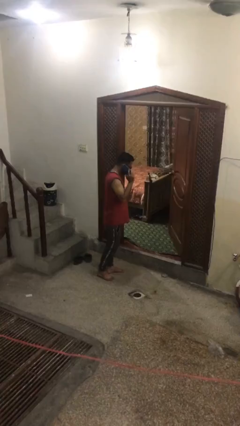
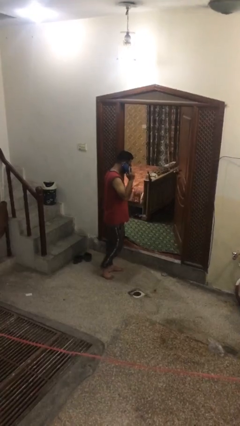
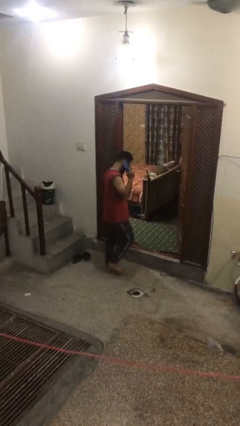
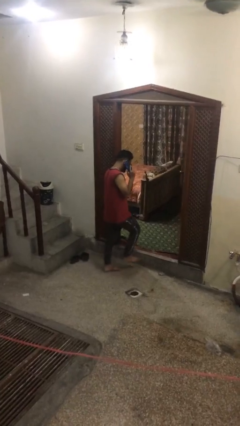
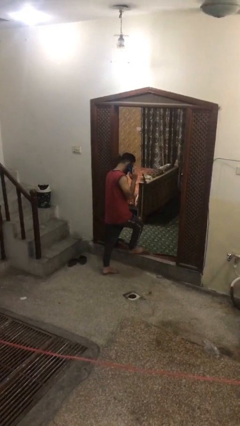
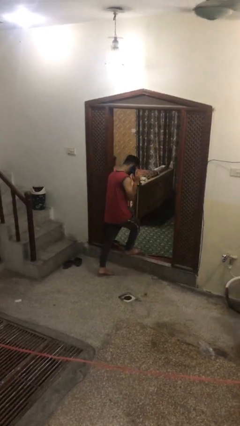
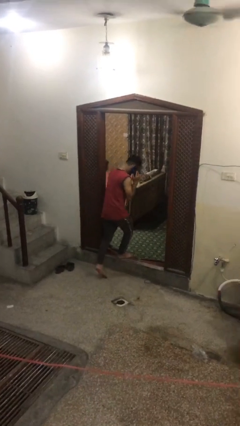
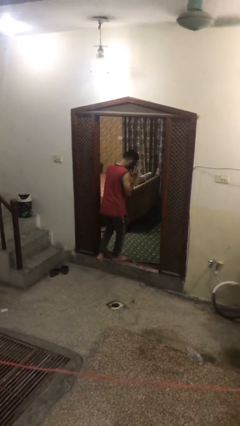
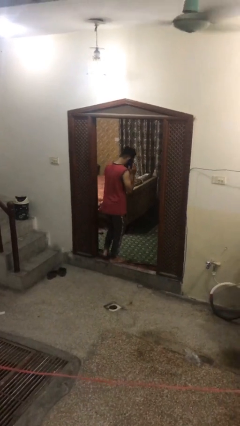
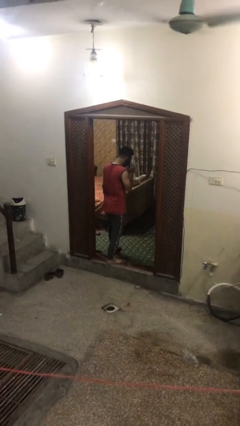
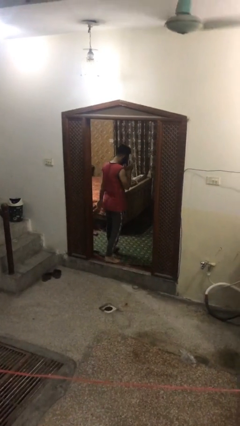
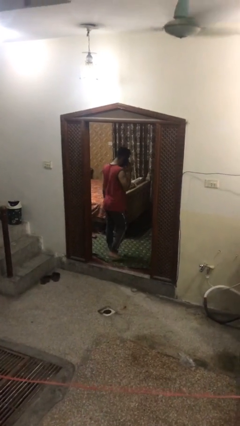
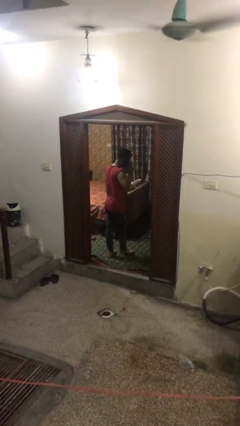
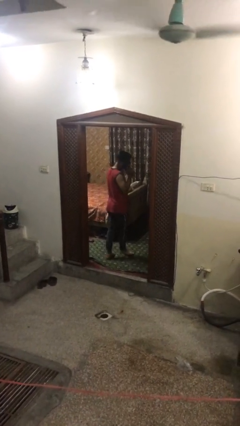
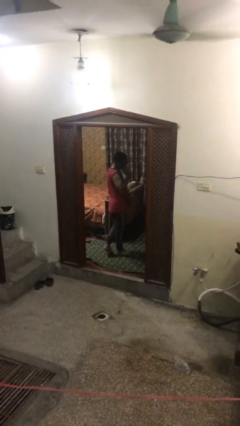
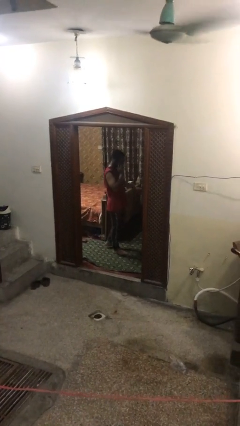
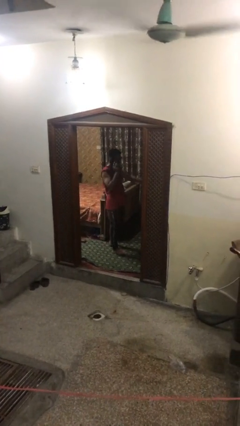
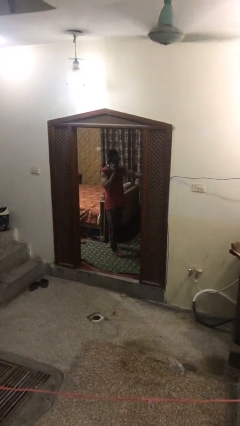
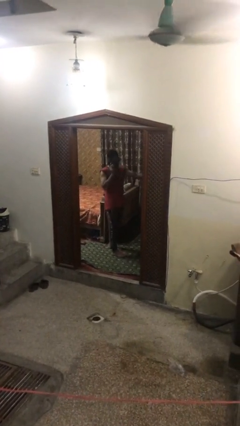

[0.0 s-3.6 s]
person exits scene through structure

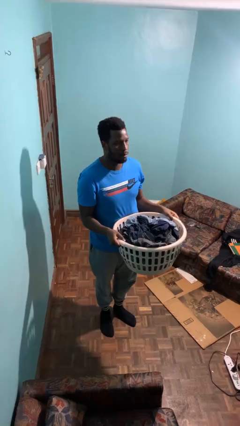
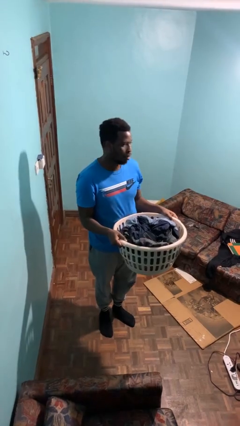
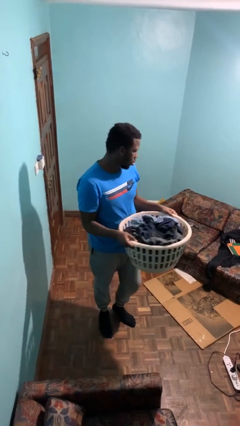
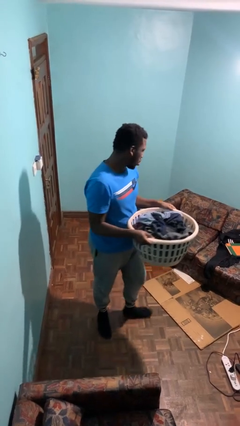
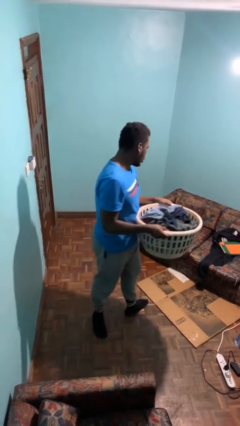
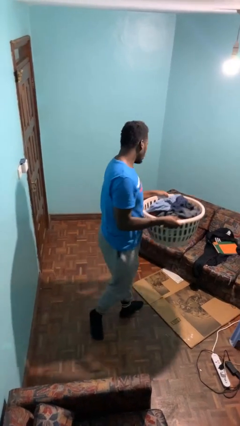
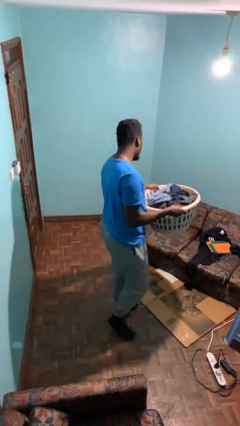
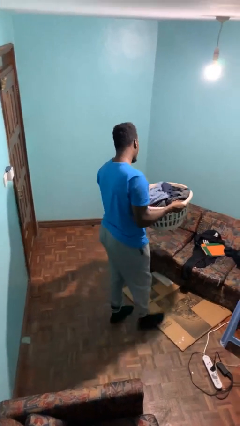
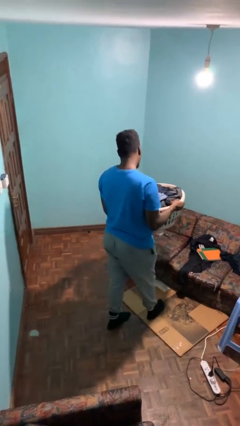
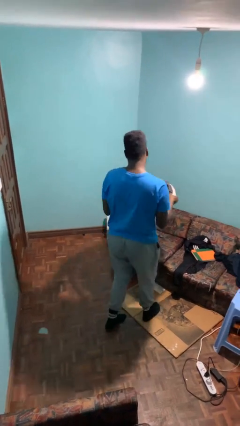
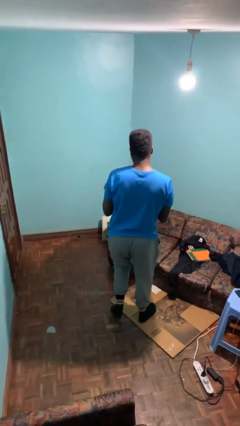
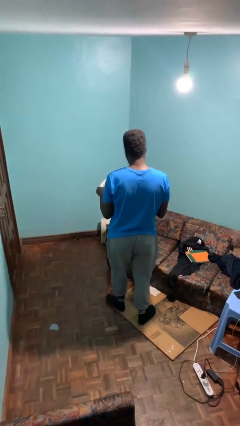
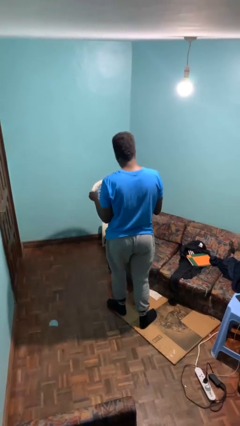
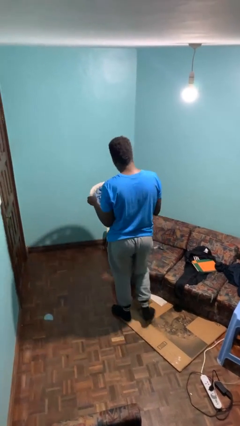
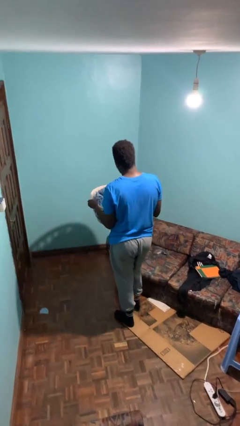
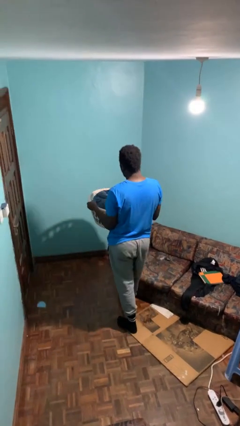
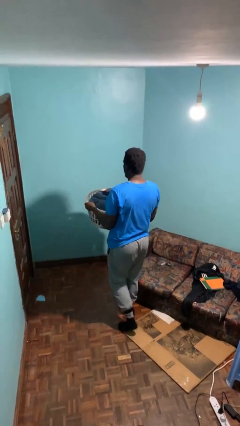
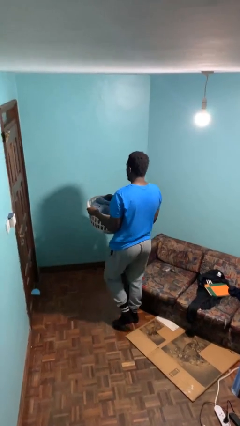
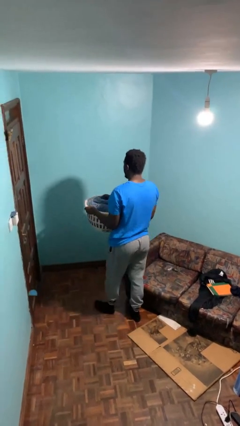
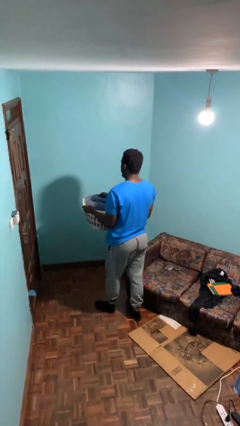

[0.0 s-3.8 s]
person carries laundry basket

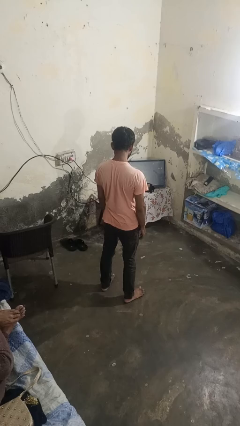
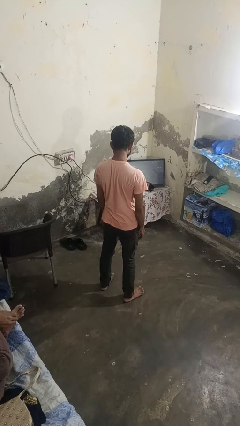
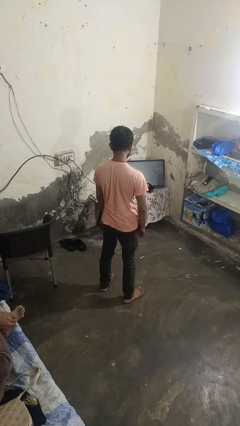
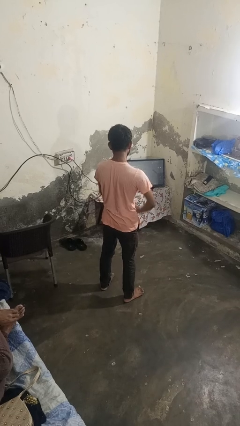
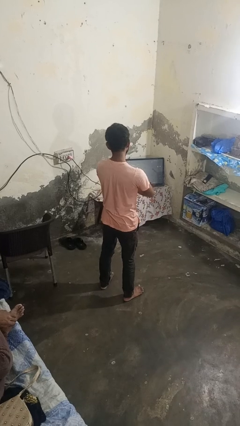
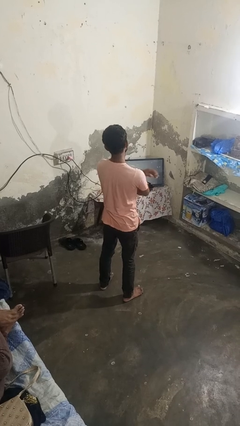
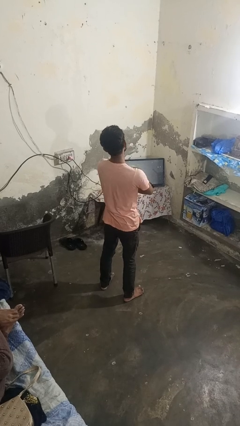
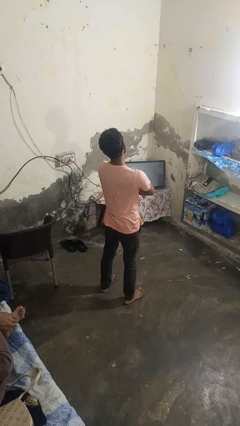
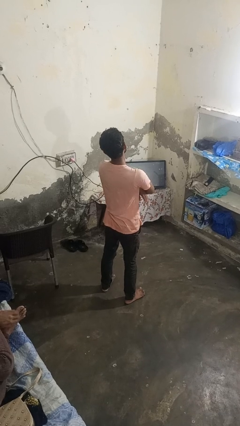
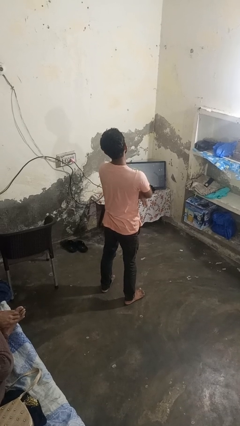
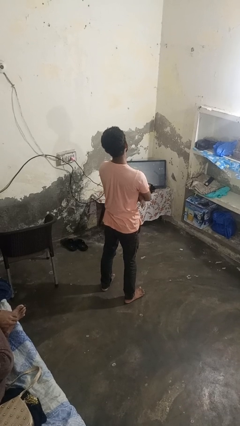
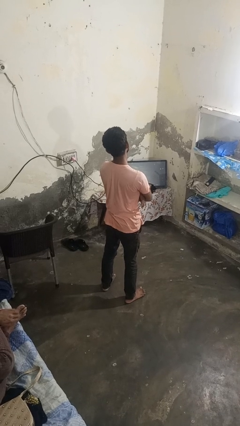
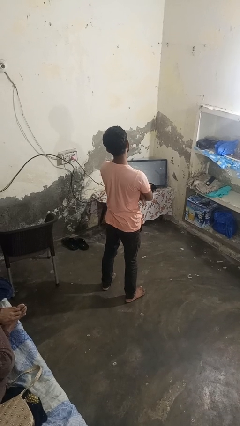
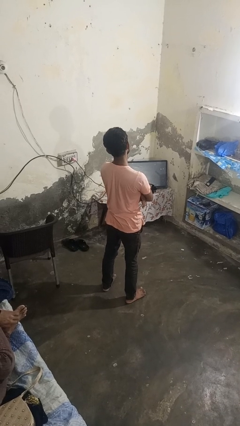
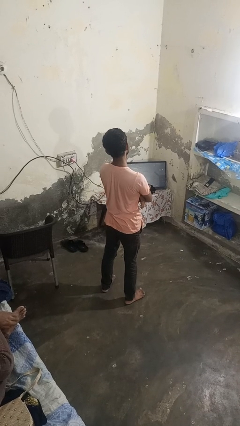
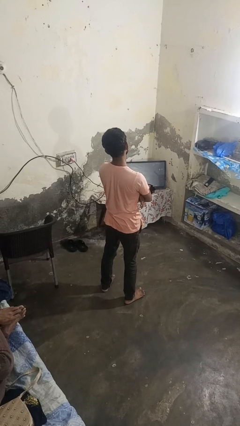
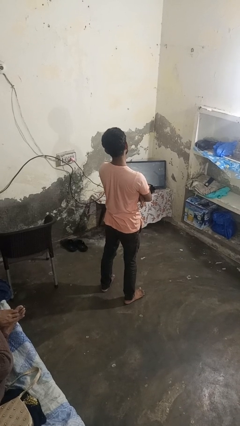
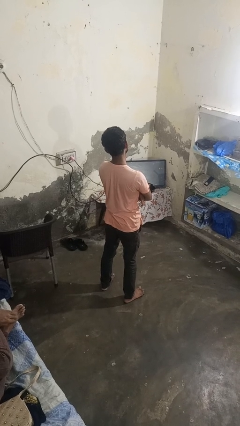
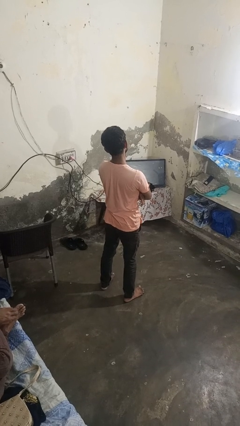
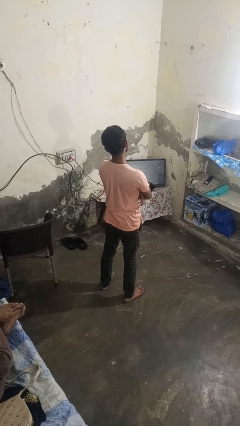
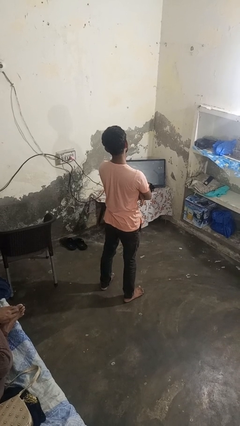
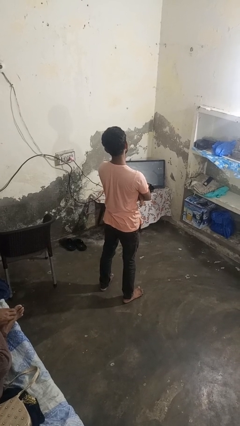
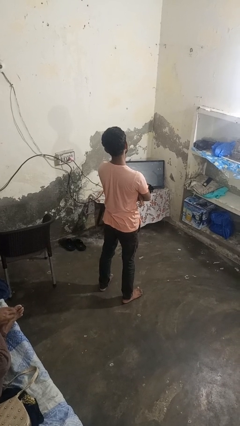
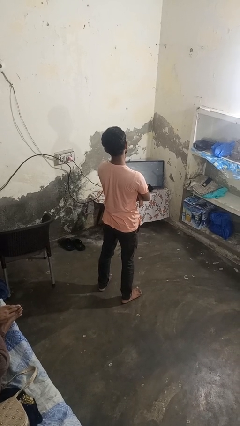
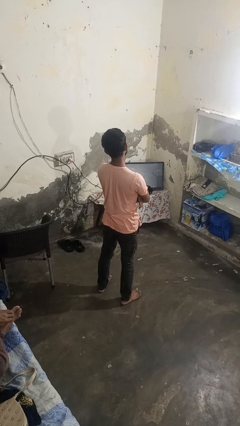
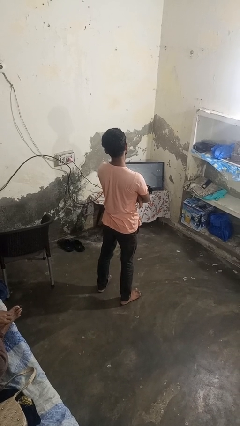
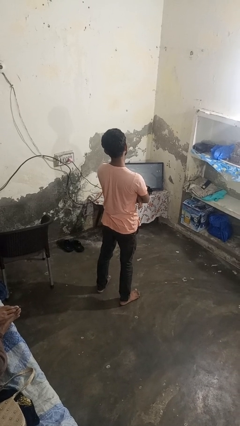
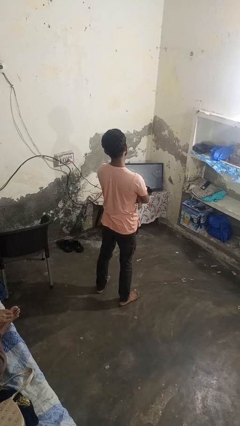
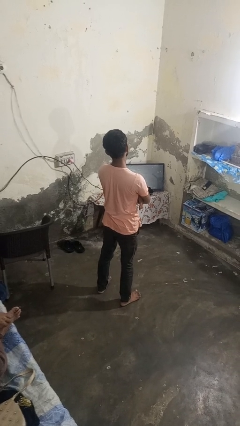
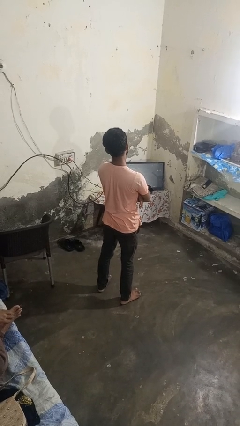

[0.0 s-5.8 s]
person crosses arms

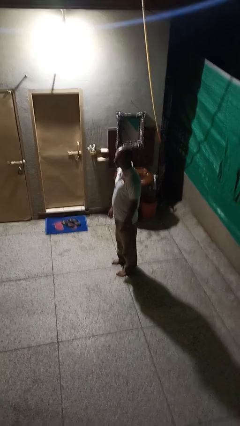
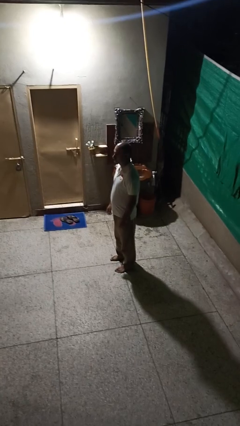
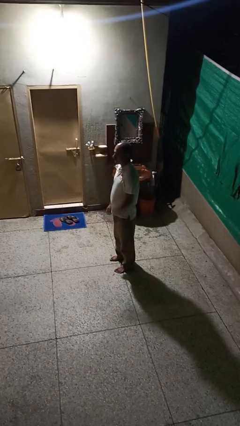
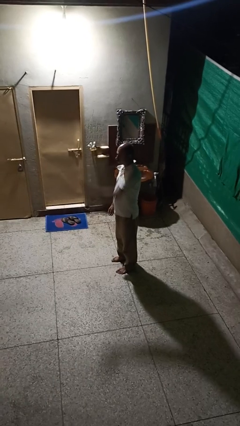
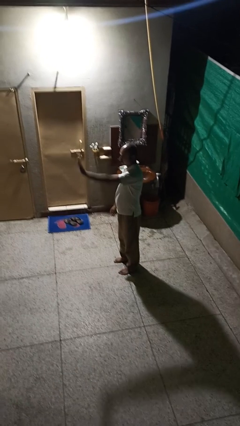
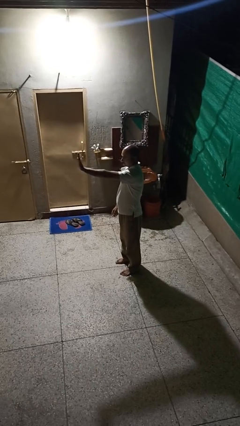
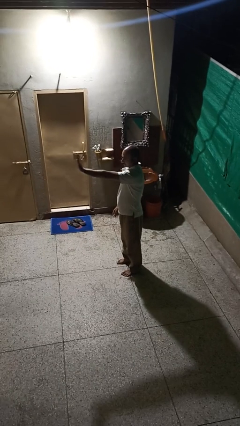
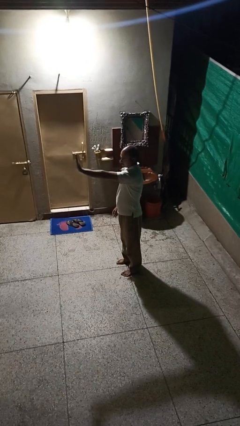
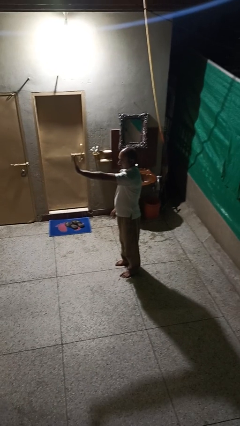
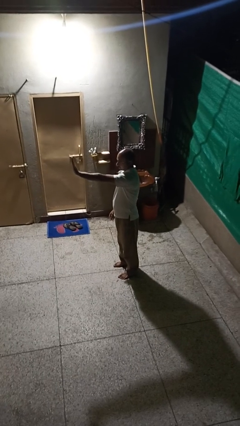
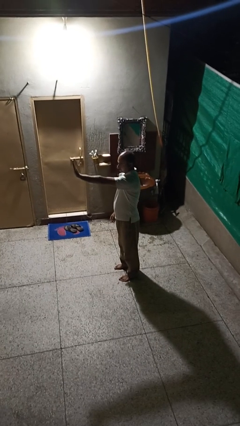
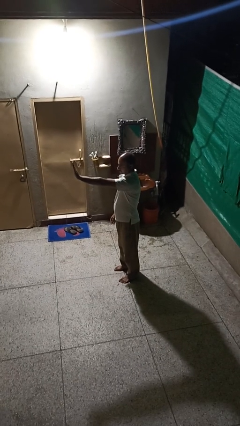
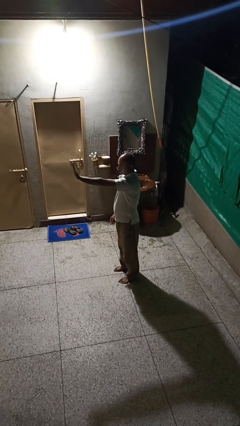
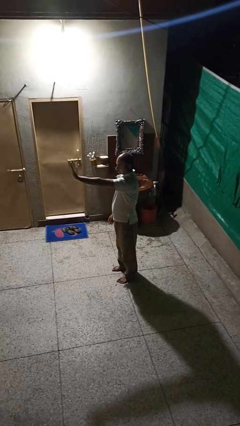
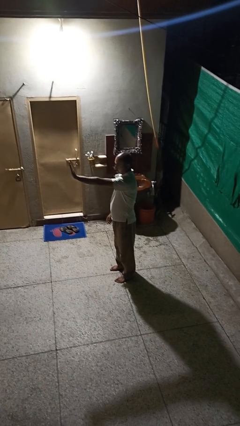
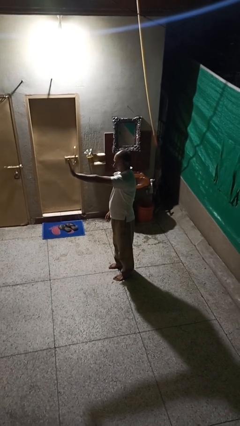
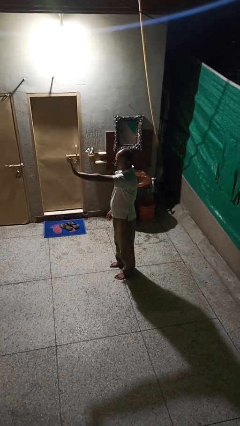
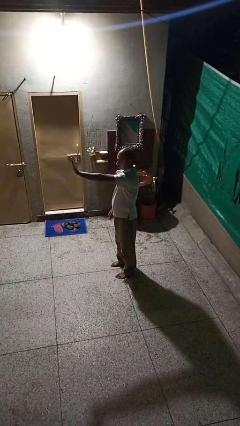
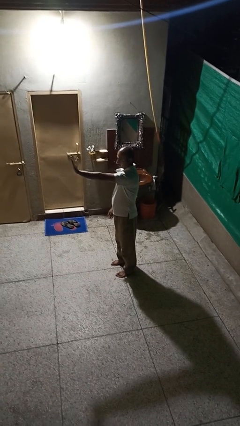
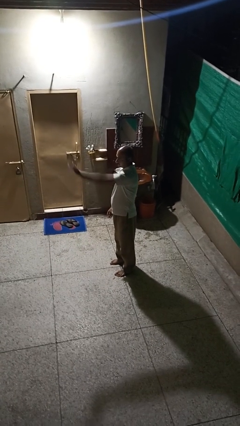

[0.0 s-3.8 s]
person gestures stop

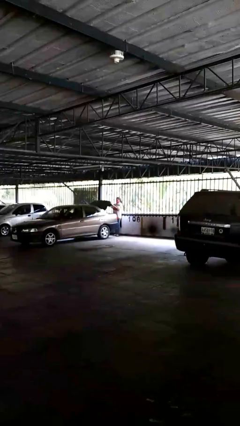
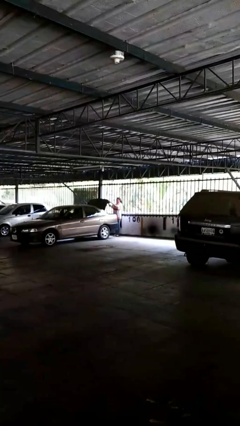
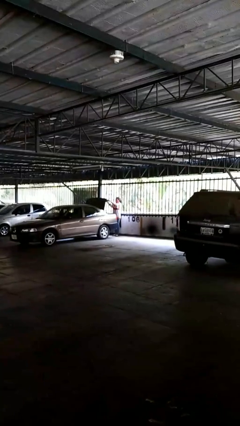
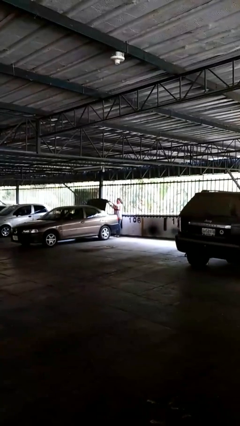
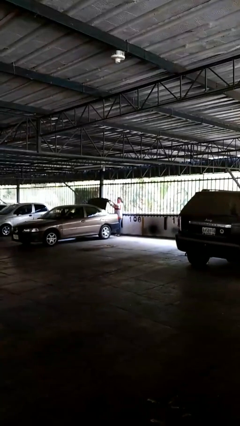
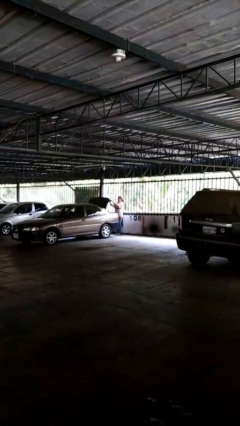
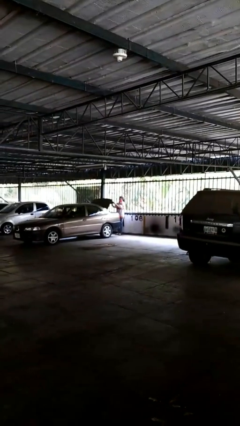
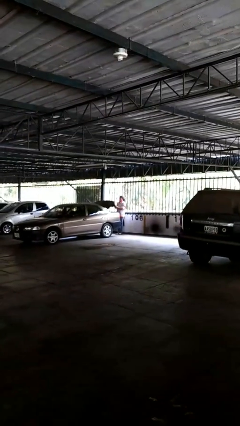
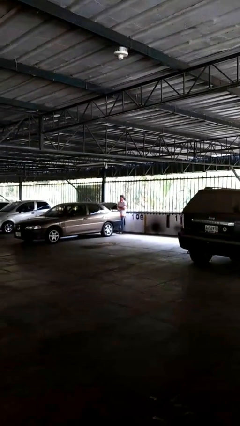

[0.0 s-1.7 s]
person opens car trunk
